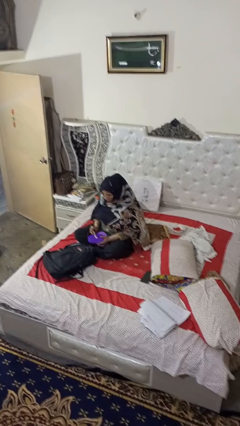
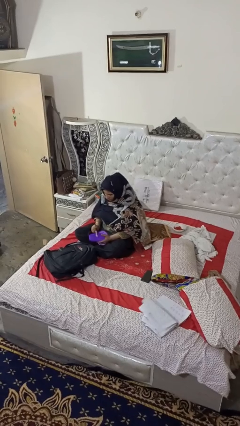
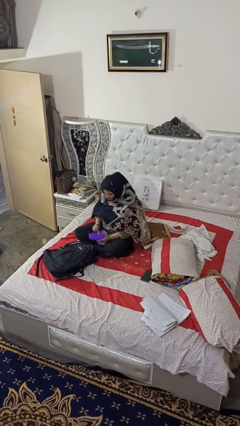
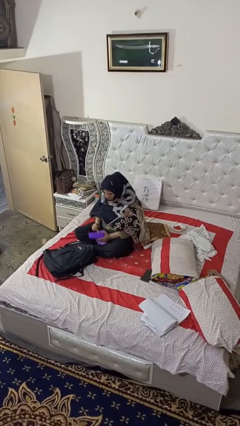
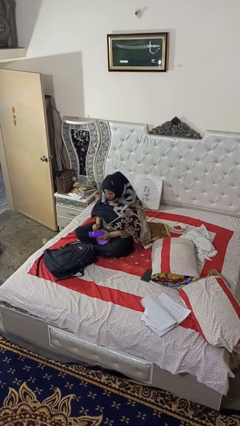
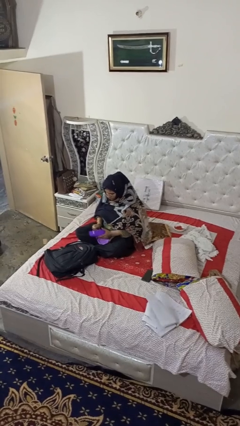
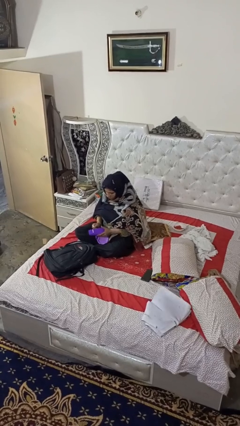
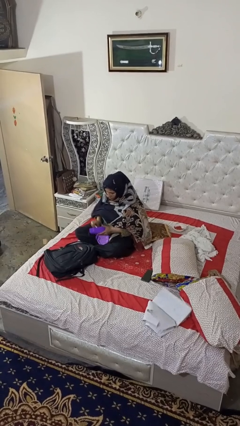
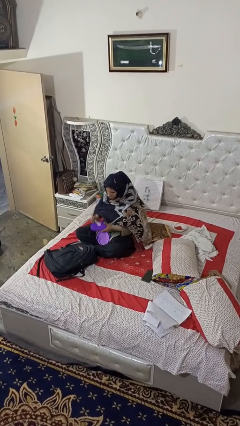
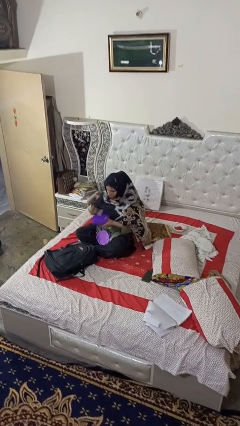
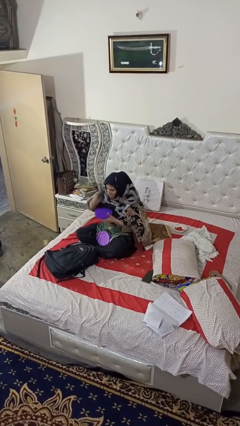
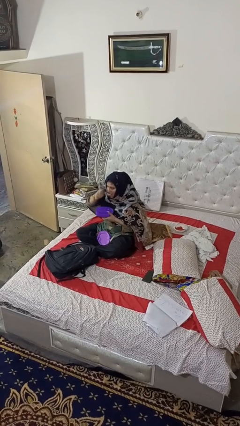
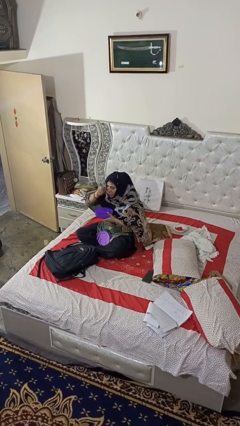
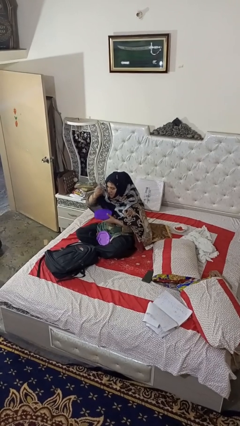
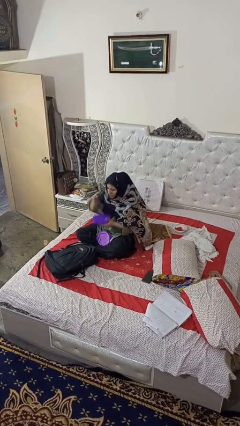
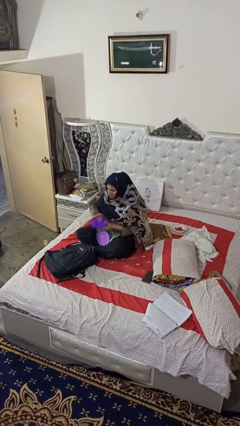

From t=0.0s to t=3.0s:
person eats snack from bag

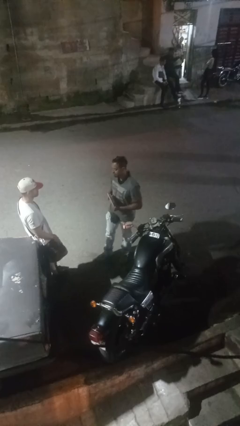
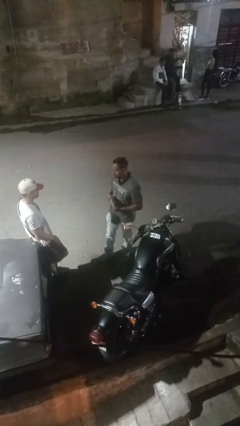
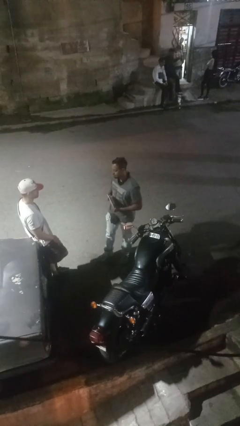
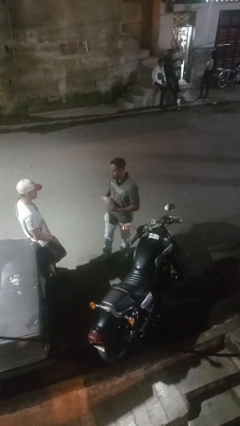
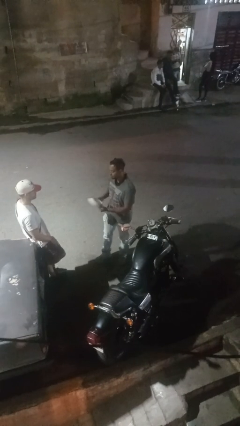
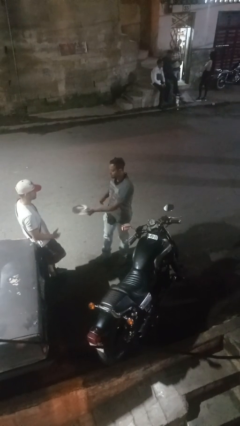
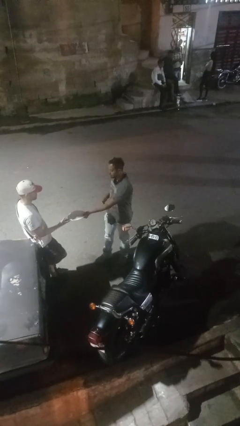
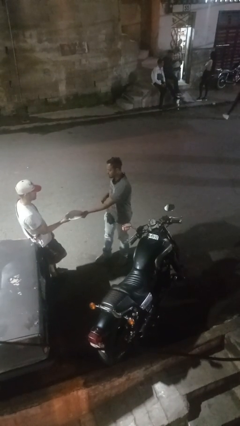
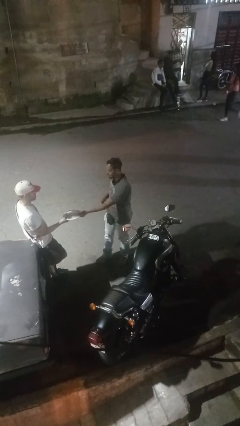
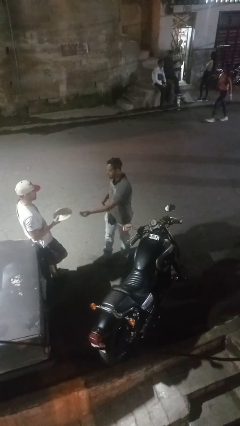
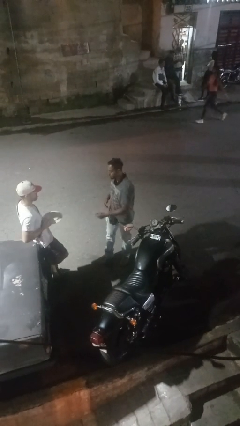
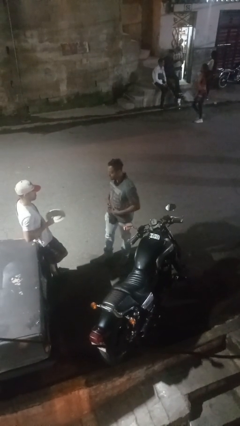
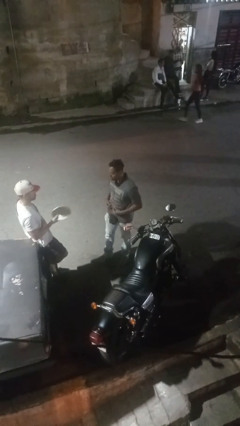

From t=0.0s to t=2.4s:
person transfers object to person

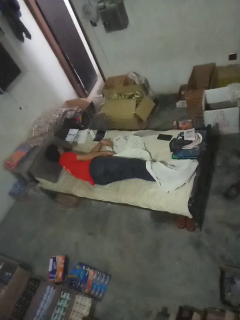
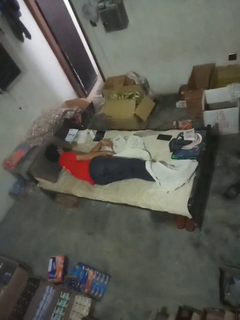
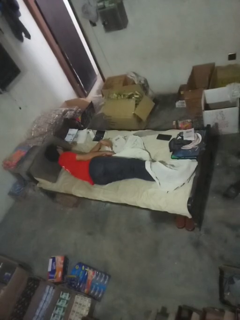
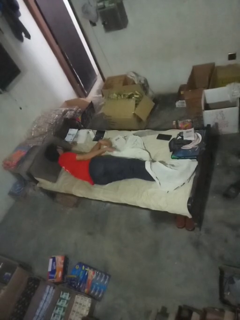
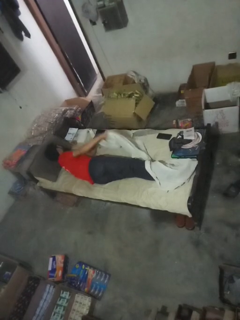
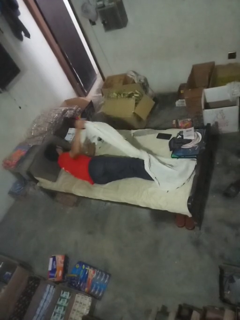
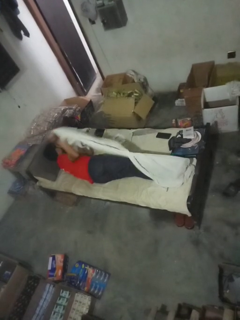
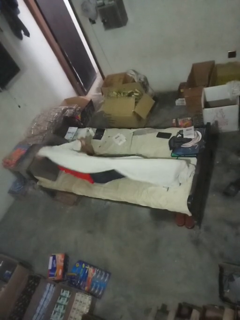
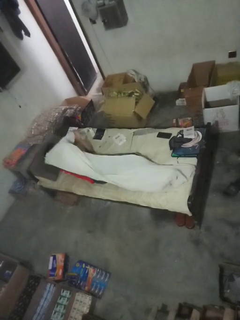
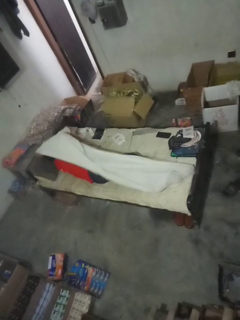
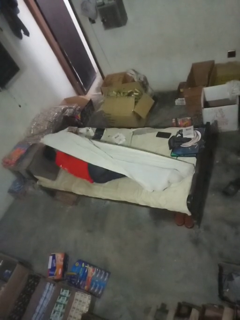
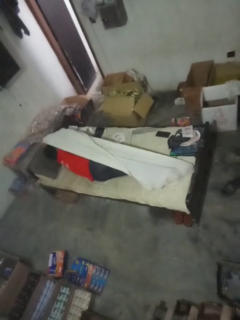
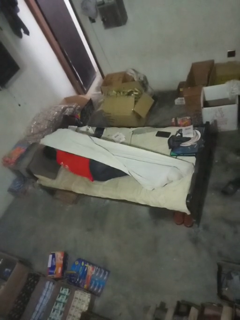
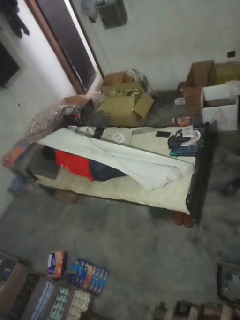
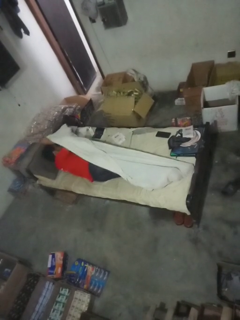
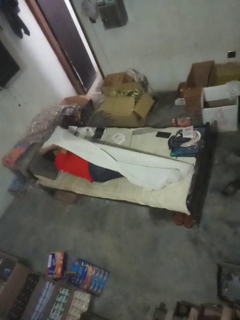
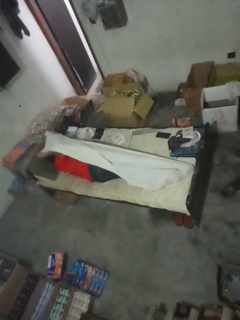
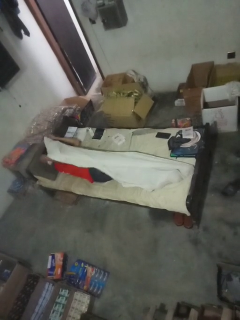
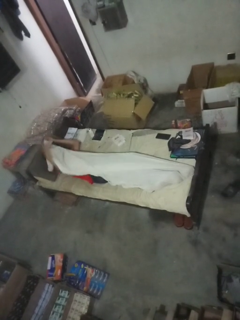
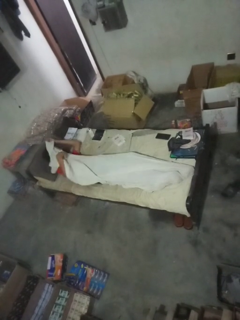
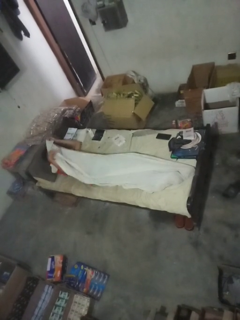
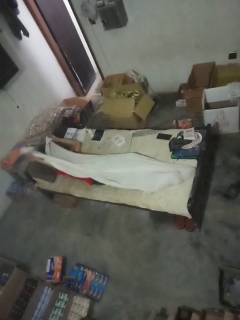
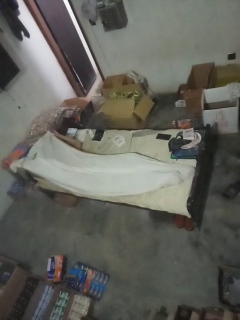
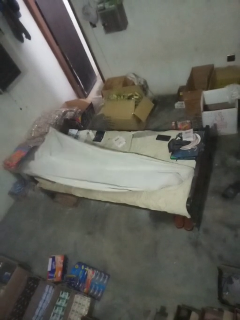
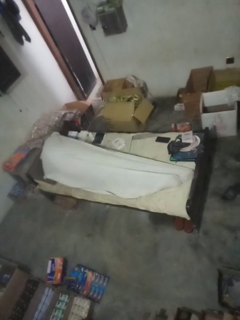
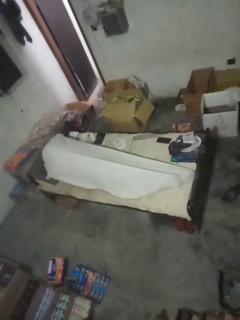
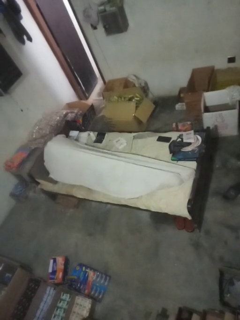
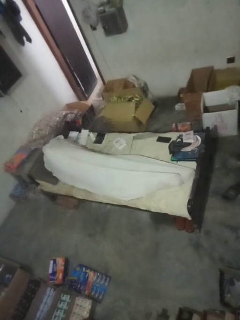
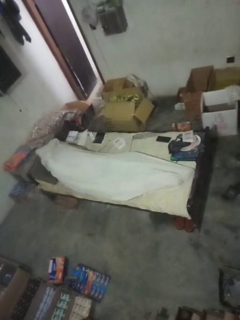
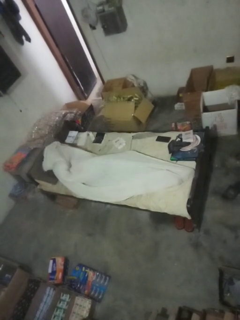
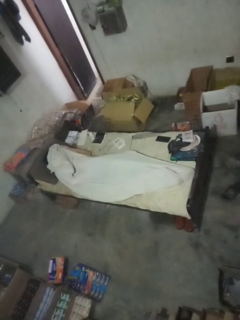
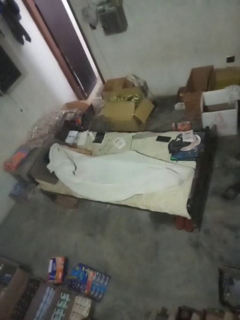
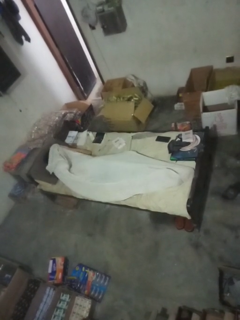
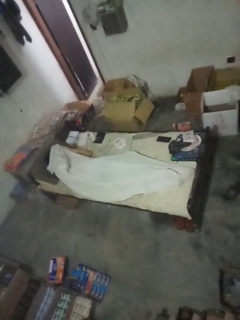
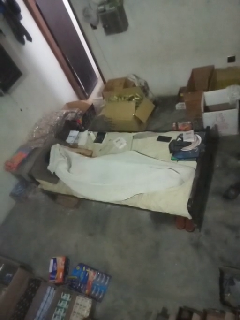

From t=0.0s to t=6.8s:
person covers with bedsheets

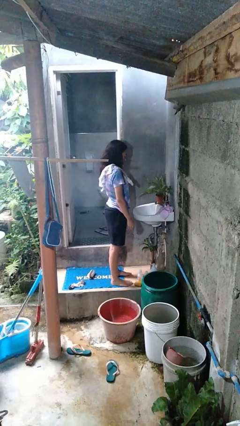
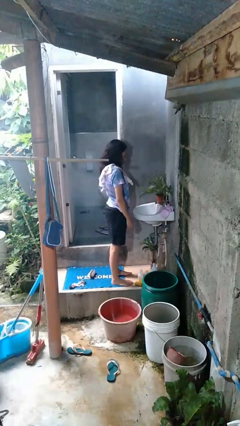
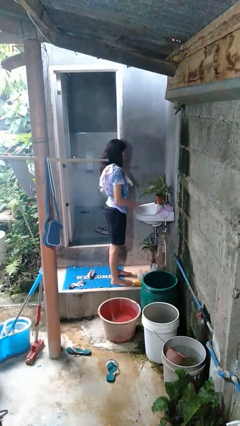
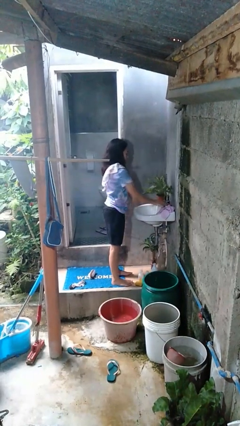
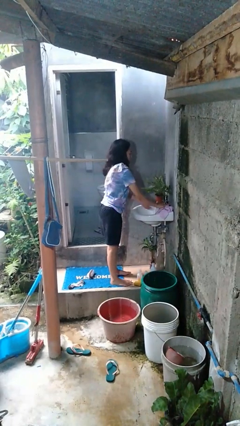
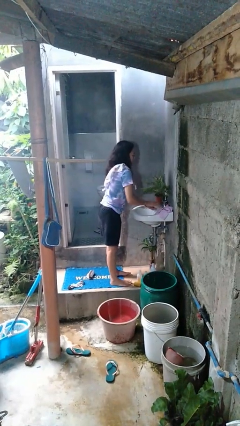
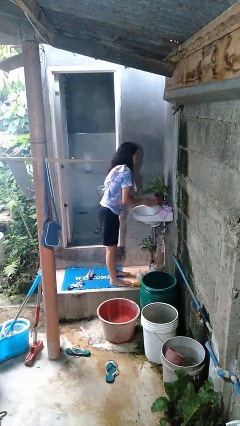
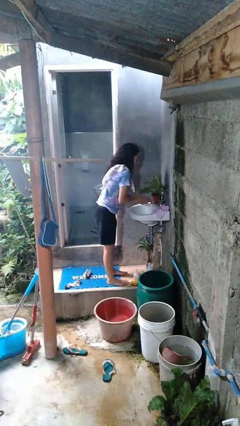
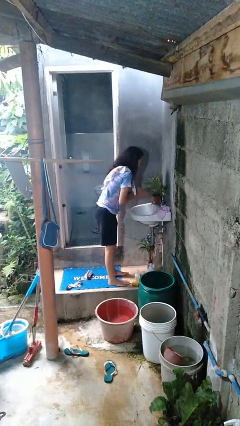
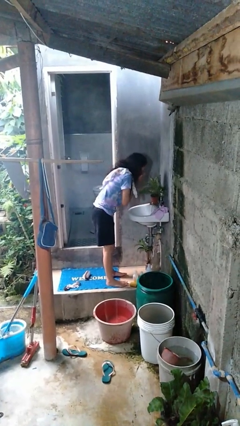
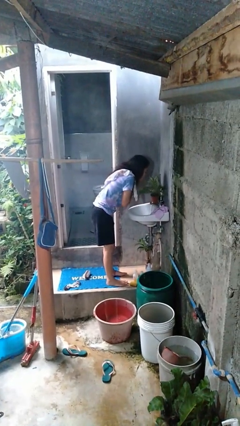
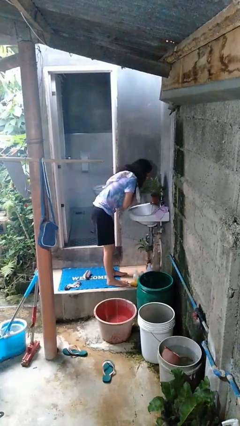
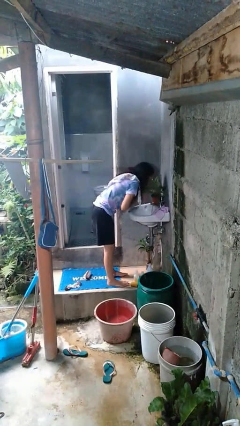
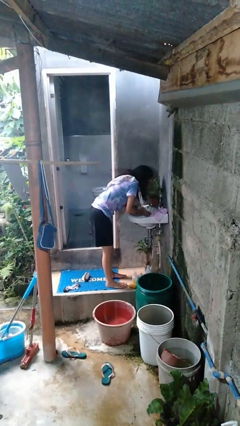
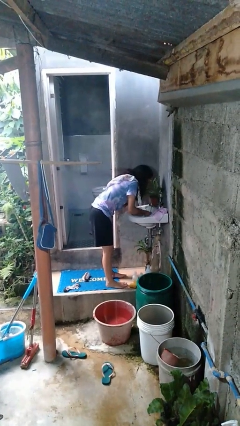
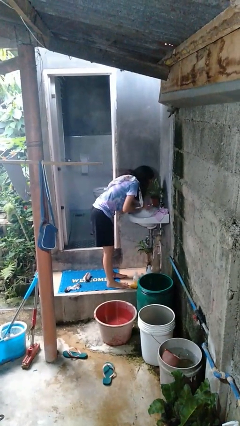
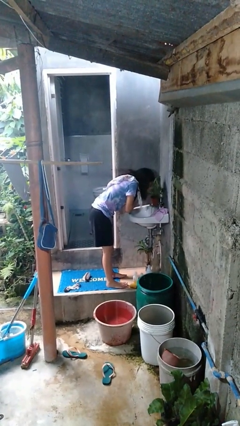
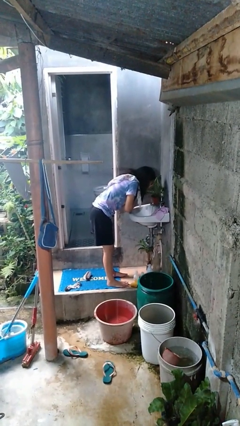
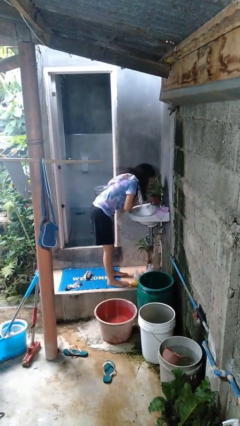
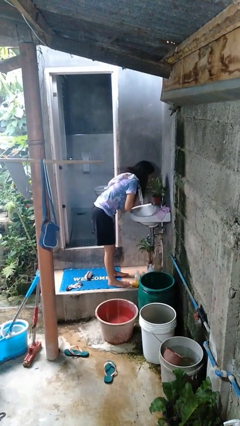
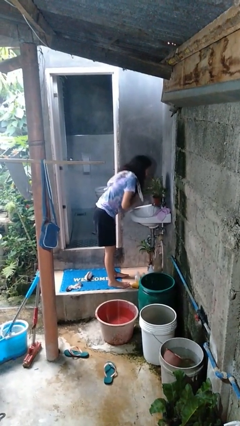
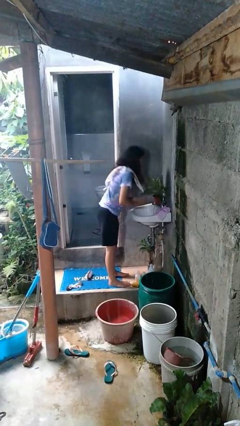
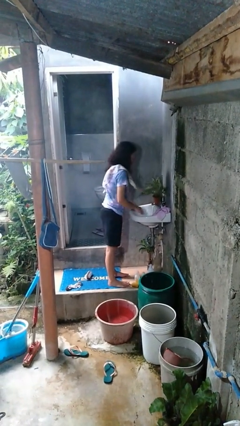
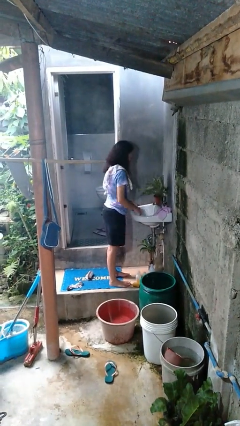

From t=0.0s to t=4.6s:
person washes face

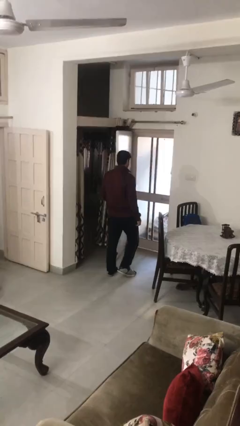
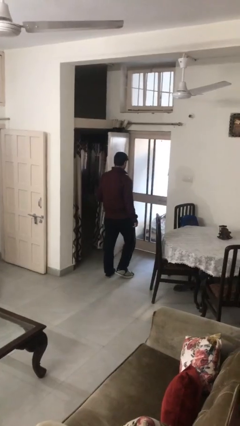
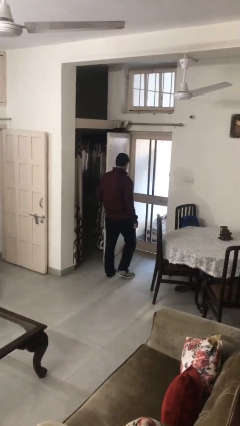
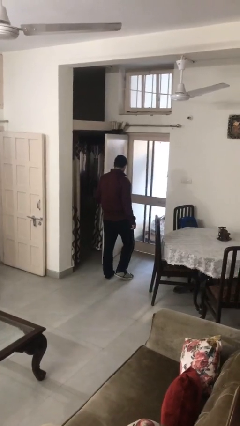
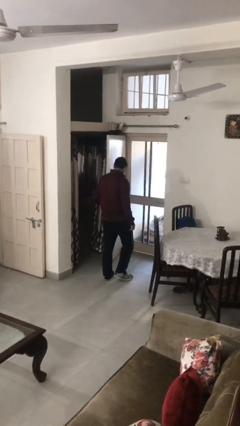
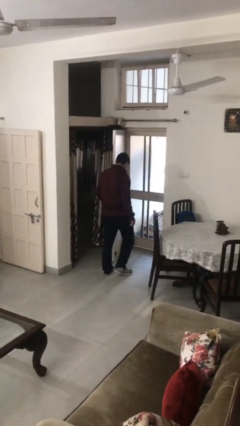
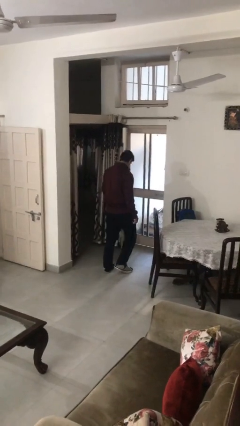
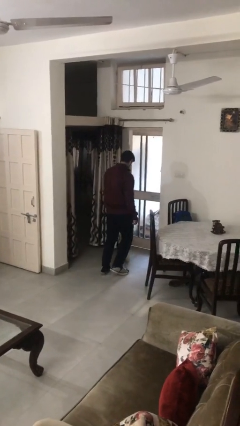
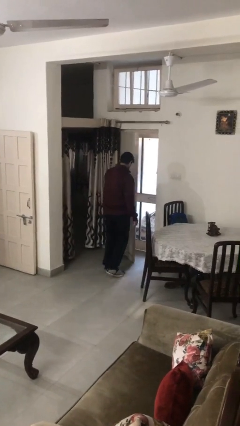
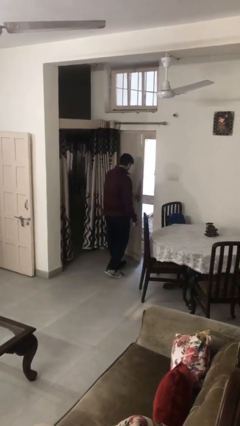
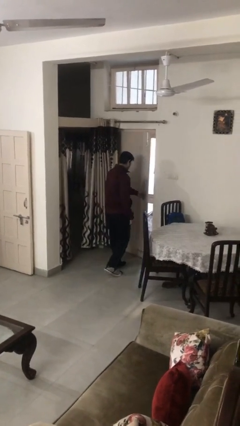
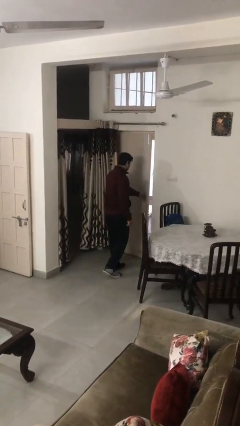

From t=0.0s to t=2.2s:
person closes facility door
